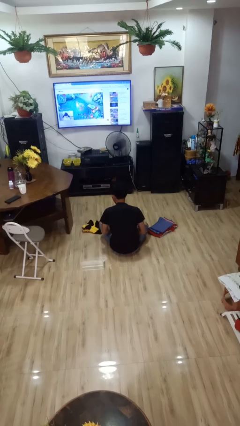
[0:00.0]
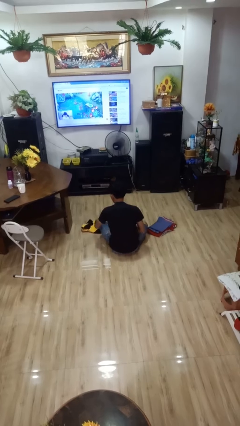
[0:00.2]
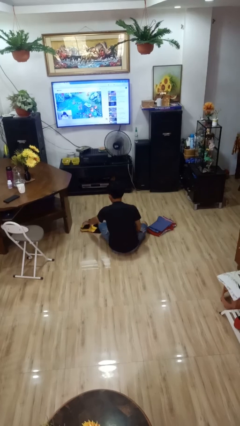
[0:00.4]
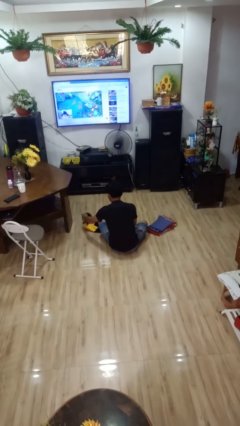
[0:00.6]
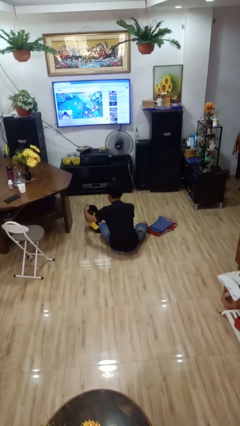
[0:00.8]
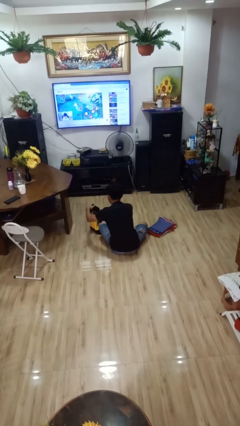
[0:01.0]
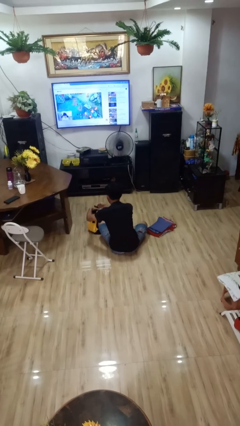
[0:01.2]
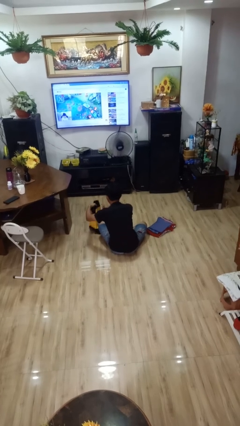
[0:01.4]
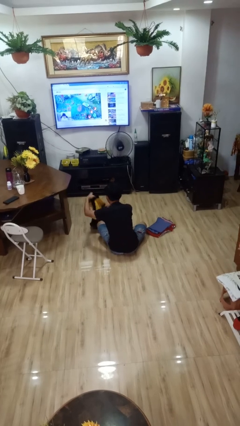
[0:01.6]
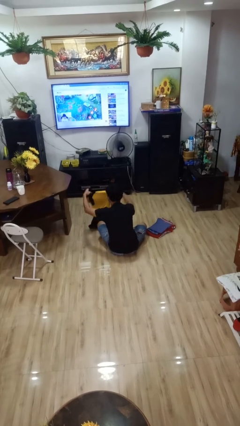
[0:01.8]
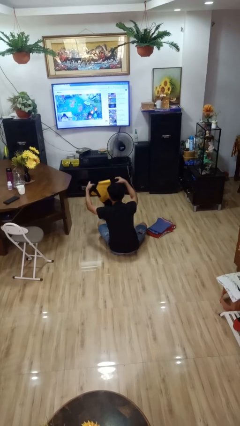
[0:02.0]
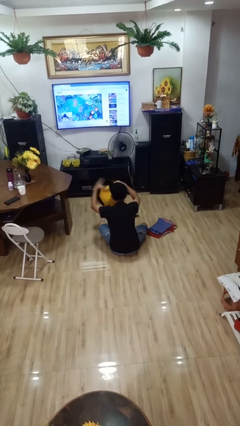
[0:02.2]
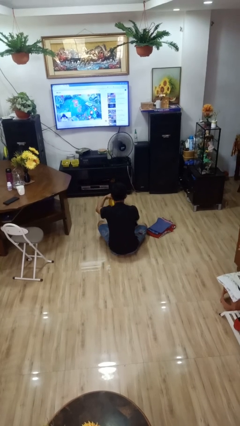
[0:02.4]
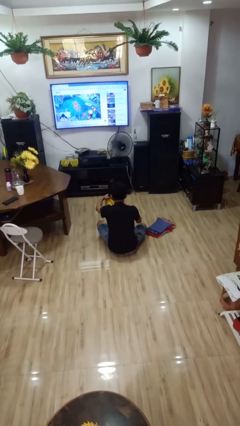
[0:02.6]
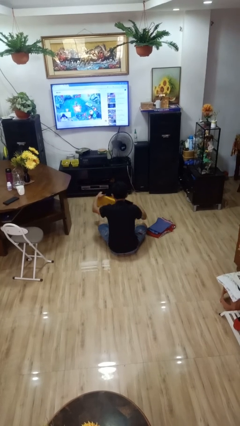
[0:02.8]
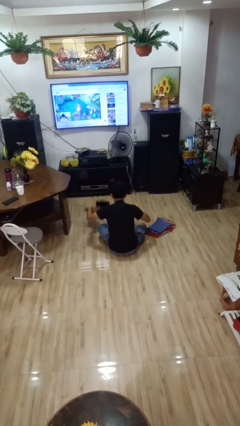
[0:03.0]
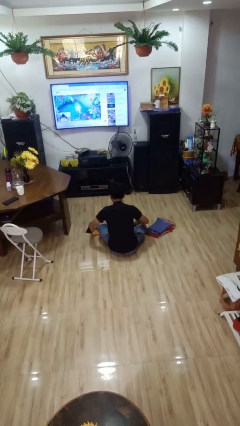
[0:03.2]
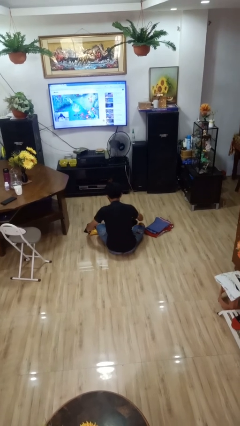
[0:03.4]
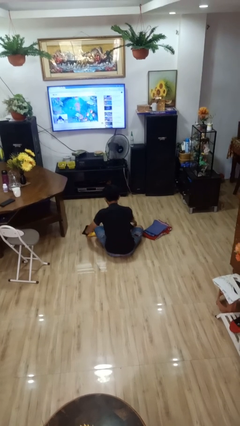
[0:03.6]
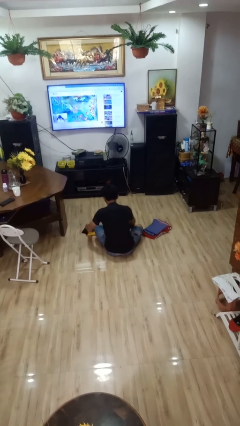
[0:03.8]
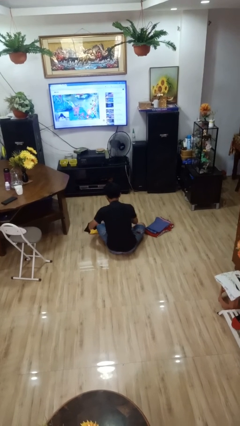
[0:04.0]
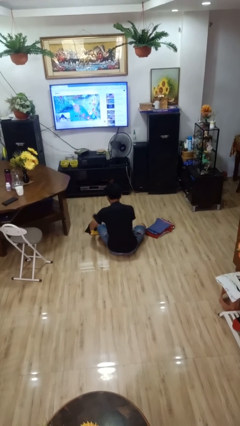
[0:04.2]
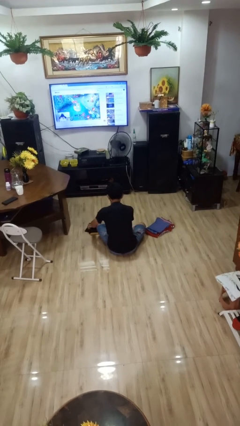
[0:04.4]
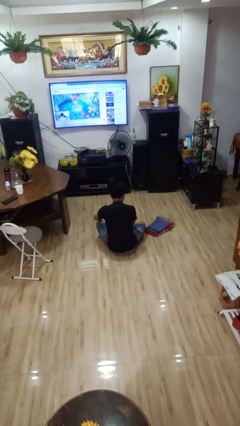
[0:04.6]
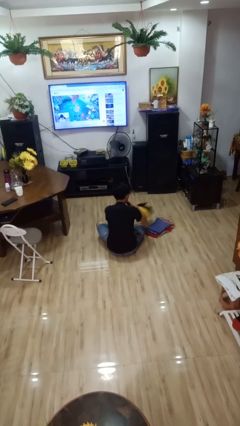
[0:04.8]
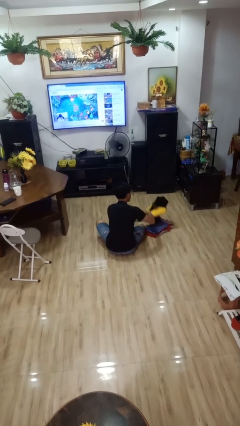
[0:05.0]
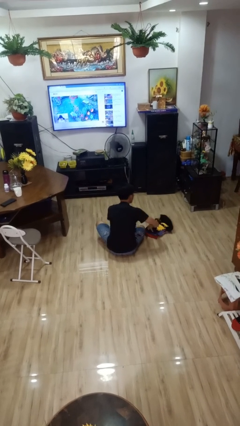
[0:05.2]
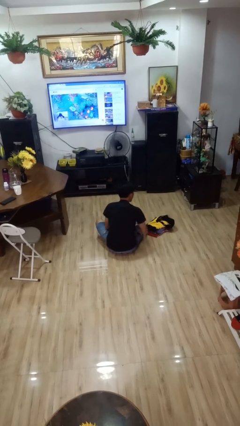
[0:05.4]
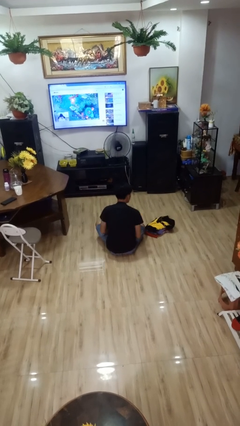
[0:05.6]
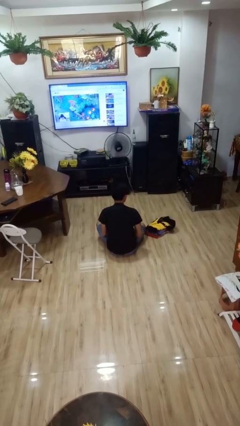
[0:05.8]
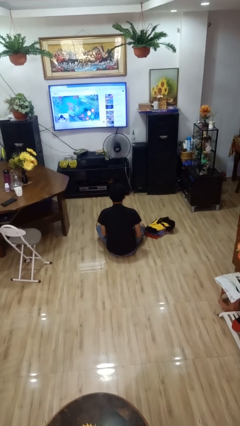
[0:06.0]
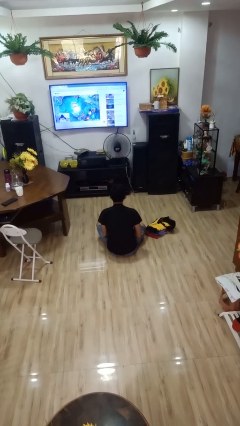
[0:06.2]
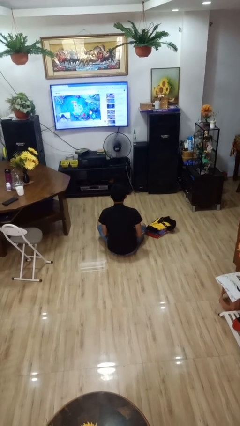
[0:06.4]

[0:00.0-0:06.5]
person folds shirt

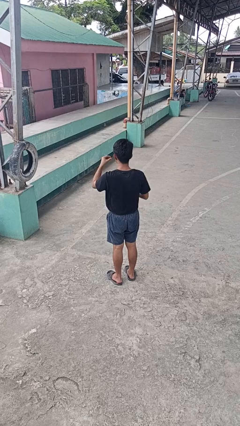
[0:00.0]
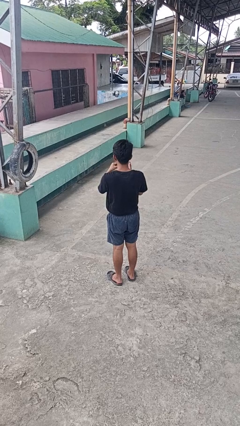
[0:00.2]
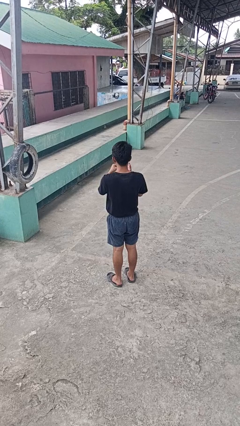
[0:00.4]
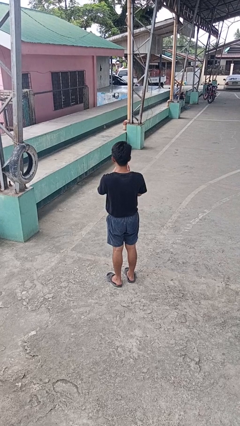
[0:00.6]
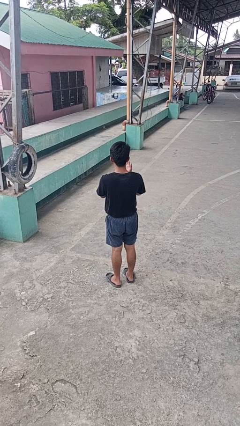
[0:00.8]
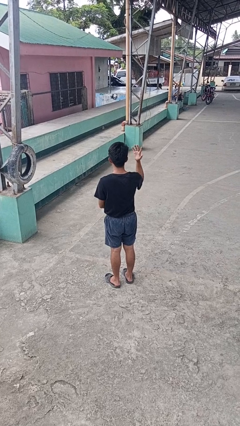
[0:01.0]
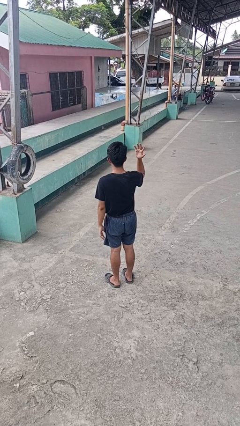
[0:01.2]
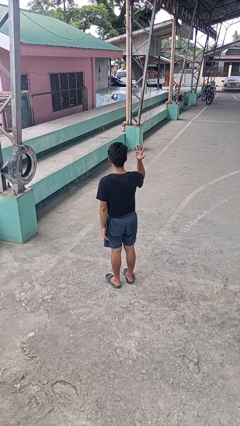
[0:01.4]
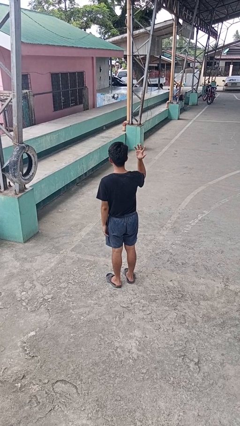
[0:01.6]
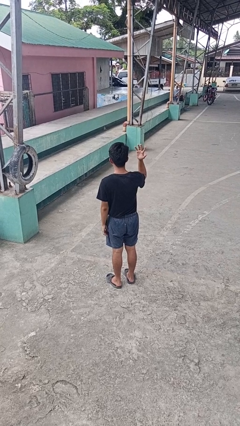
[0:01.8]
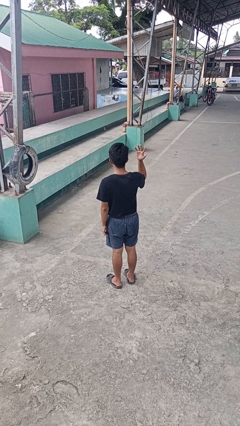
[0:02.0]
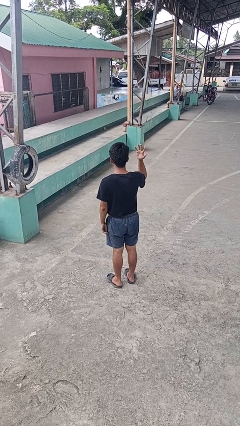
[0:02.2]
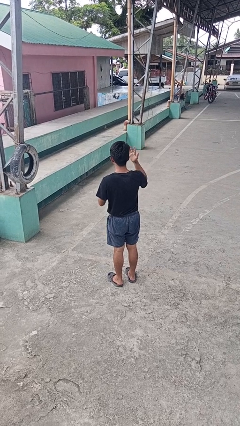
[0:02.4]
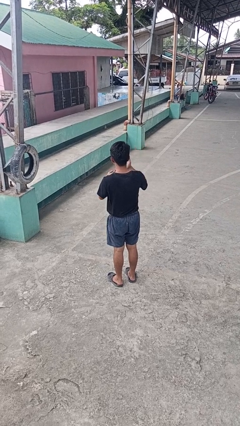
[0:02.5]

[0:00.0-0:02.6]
person puts on ring

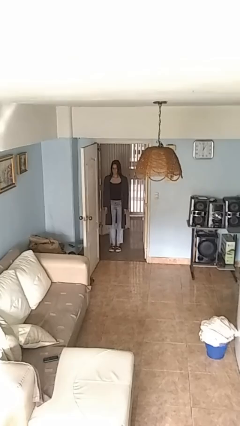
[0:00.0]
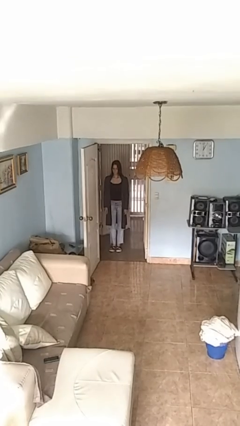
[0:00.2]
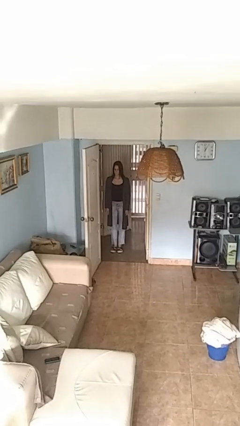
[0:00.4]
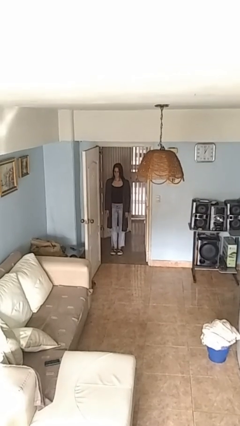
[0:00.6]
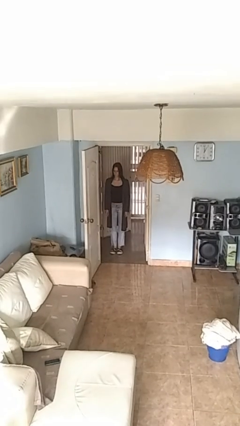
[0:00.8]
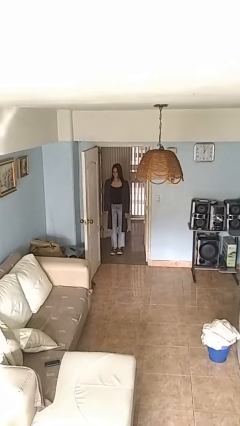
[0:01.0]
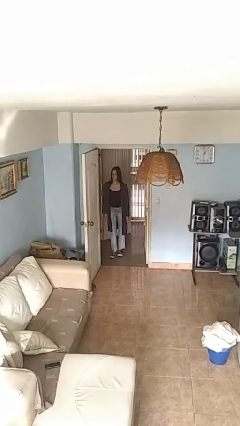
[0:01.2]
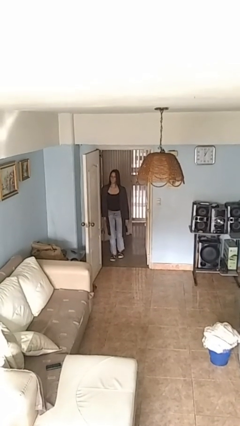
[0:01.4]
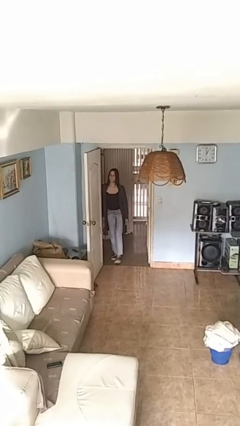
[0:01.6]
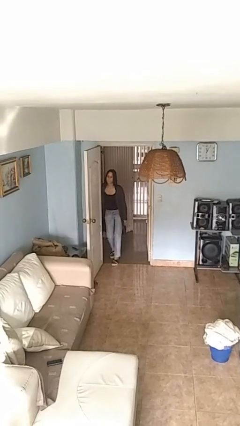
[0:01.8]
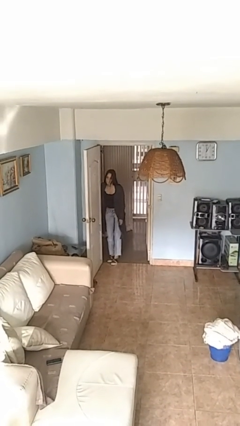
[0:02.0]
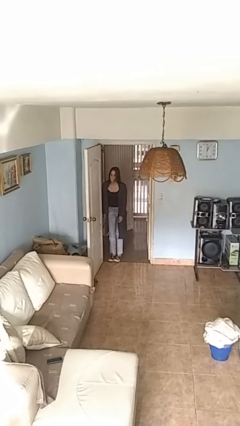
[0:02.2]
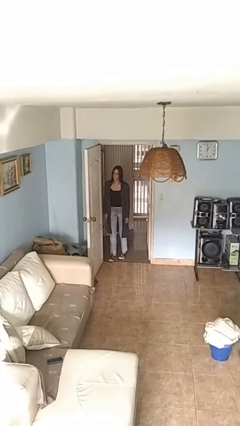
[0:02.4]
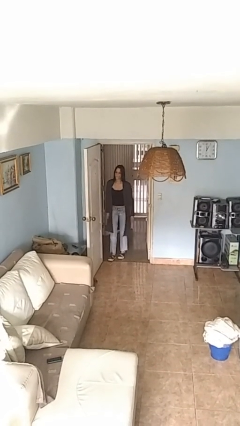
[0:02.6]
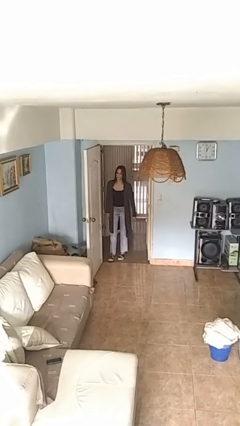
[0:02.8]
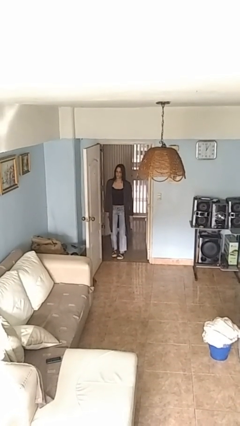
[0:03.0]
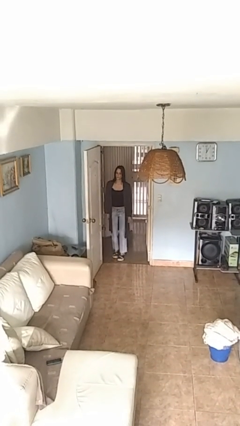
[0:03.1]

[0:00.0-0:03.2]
person bumps into wall

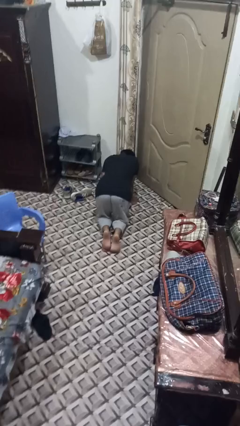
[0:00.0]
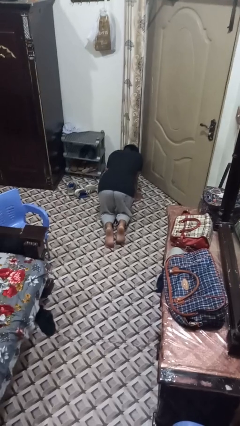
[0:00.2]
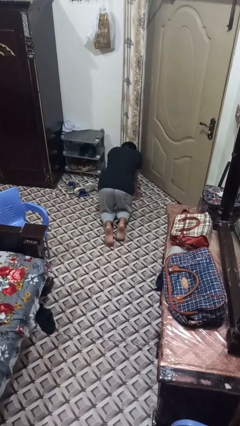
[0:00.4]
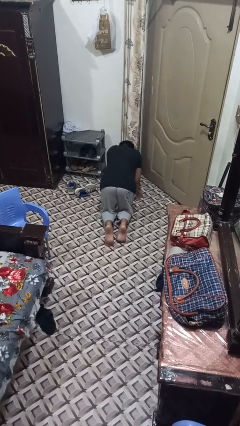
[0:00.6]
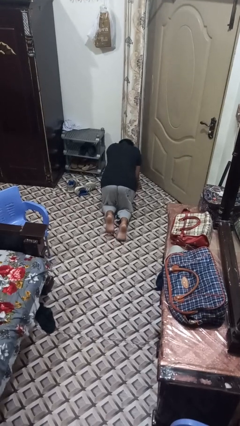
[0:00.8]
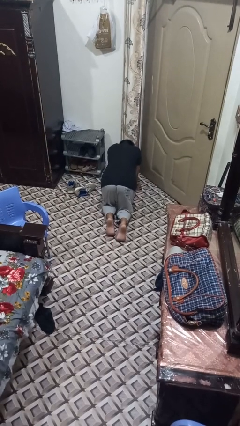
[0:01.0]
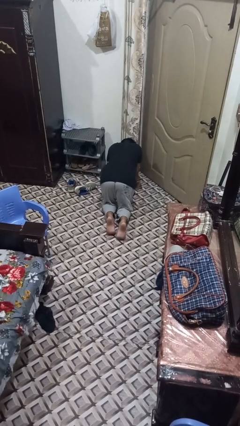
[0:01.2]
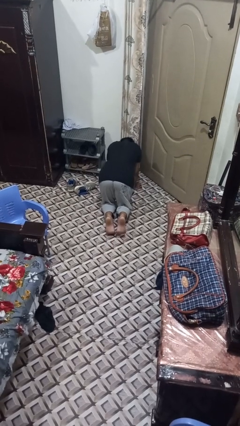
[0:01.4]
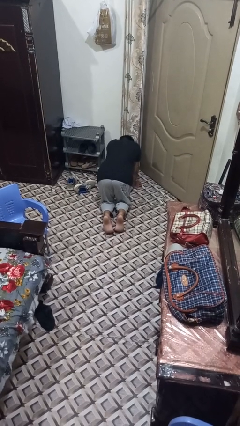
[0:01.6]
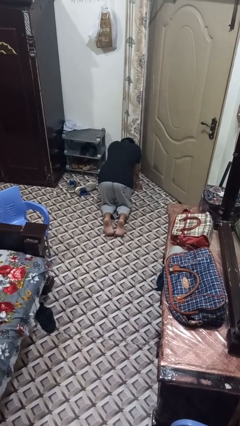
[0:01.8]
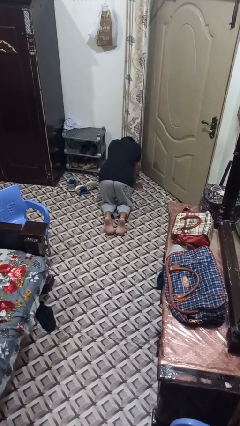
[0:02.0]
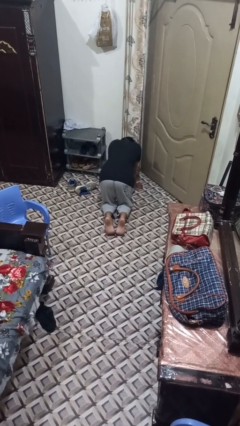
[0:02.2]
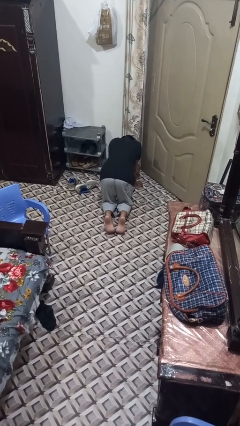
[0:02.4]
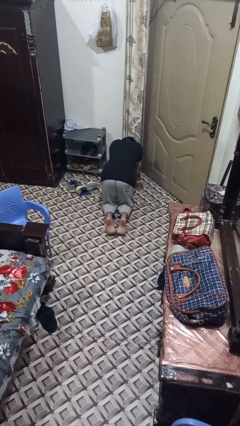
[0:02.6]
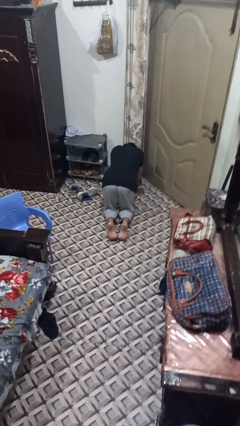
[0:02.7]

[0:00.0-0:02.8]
person crawls

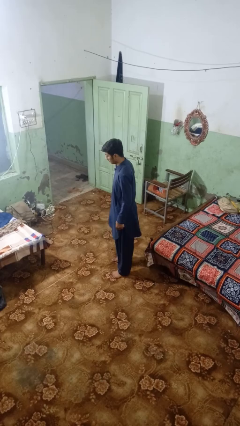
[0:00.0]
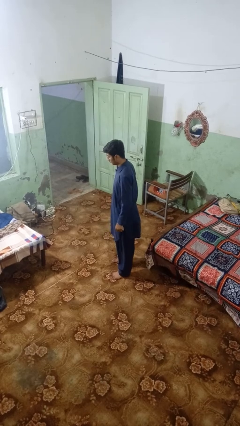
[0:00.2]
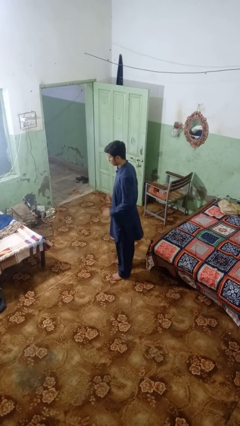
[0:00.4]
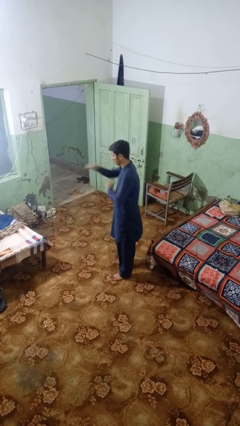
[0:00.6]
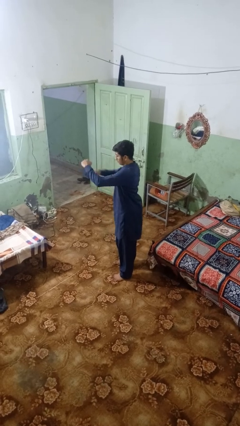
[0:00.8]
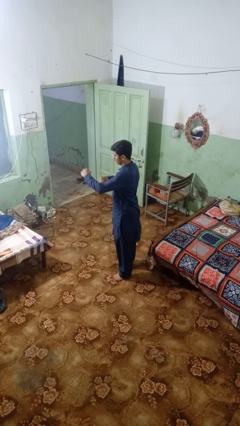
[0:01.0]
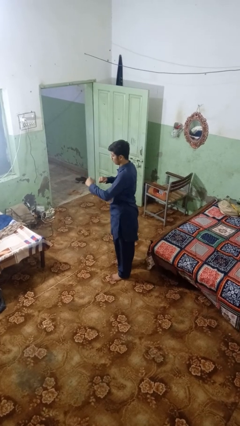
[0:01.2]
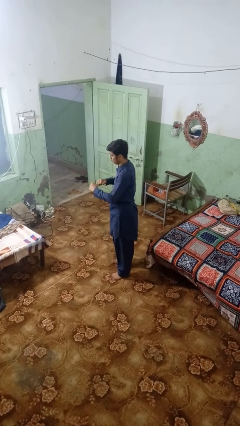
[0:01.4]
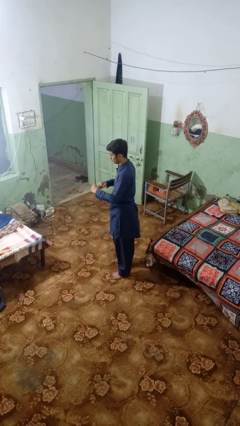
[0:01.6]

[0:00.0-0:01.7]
person karate chop

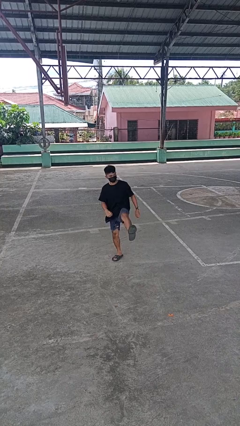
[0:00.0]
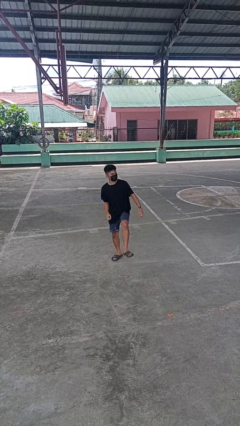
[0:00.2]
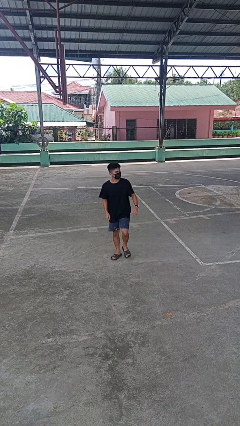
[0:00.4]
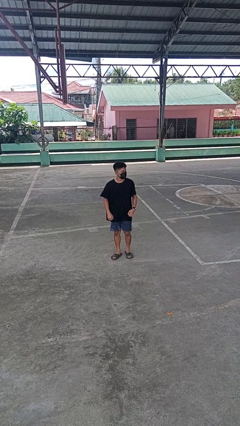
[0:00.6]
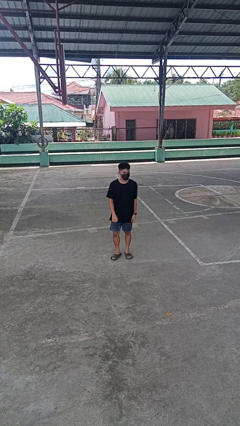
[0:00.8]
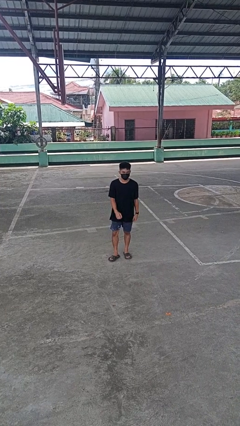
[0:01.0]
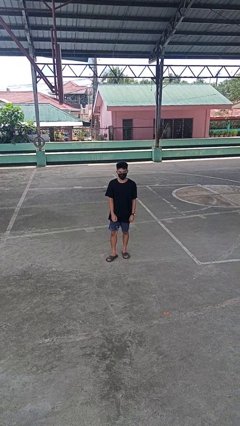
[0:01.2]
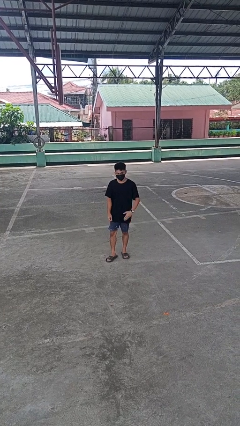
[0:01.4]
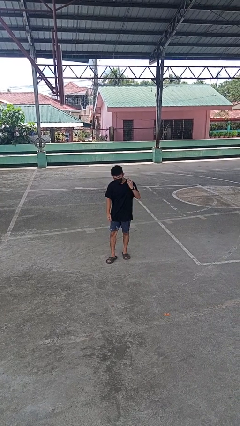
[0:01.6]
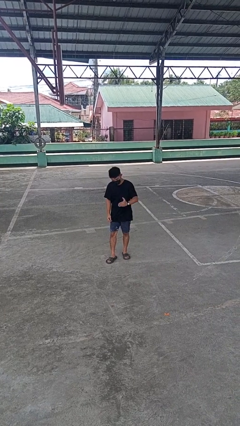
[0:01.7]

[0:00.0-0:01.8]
person karate kicks
